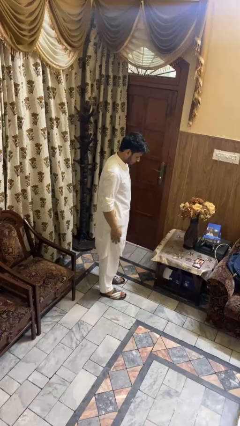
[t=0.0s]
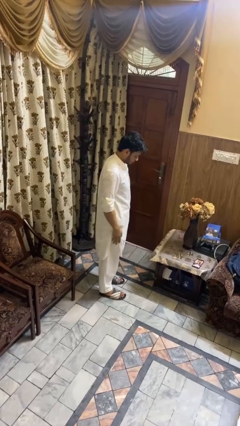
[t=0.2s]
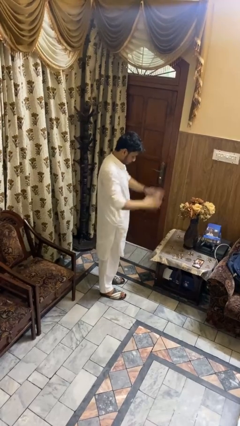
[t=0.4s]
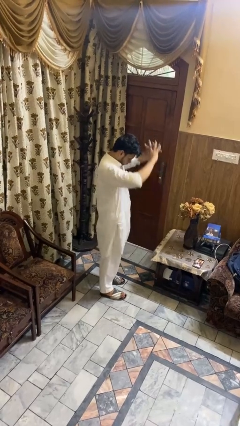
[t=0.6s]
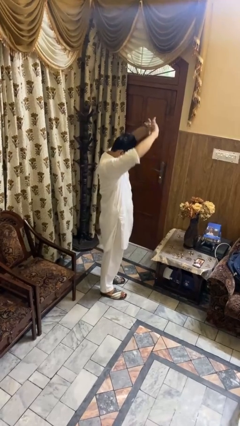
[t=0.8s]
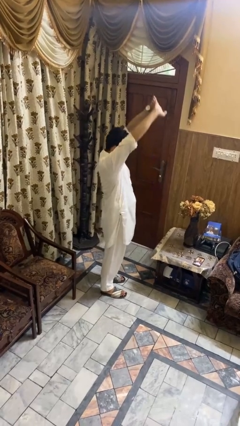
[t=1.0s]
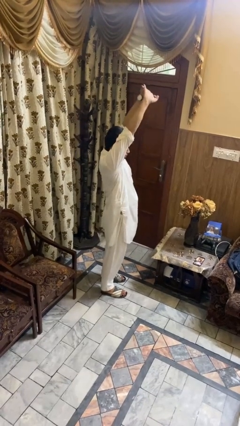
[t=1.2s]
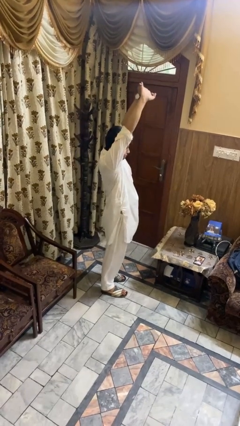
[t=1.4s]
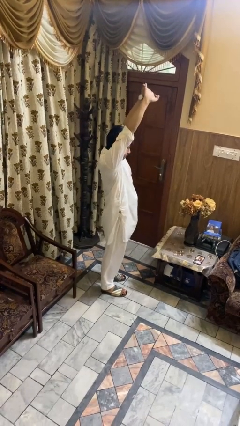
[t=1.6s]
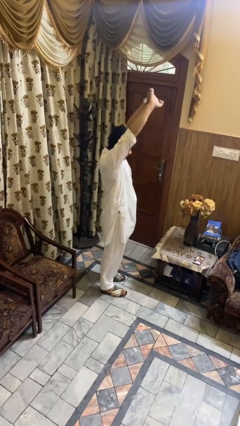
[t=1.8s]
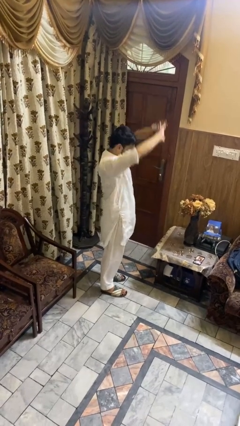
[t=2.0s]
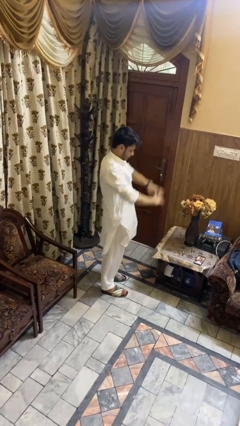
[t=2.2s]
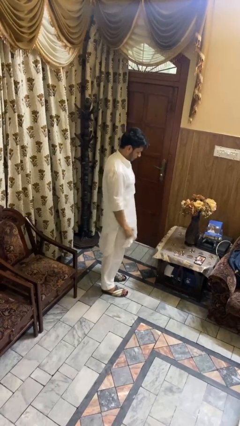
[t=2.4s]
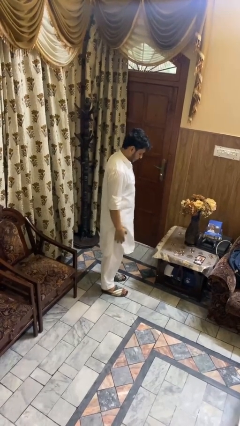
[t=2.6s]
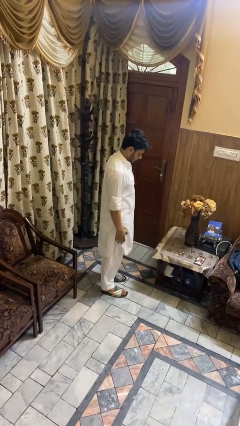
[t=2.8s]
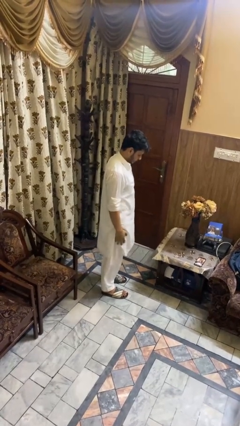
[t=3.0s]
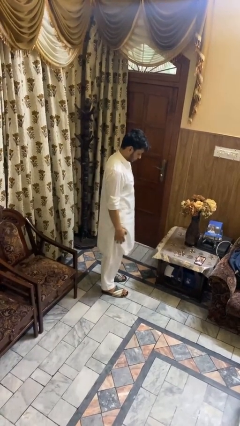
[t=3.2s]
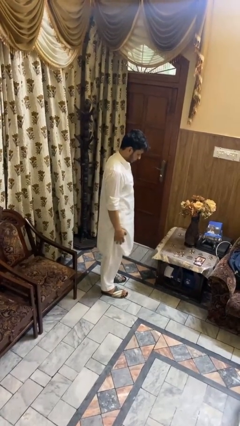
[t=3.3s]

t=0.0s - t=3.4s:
person stretches arms over head

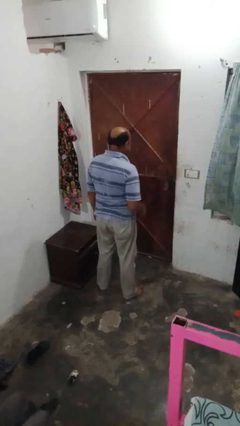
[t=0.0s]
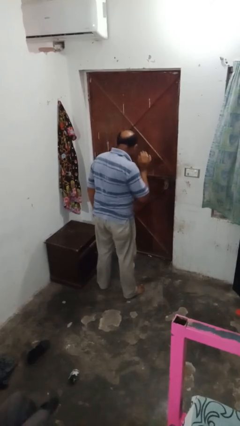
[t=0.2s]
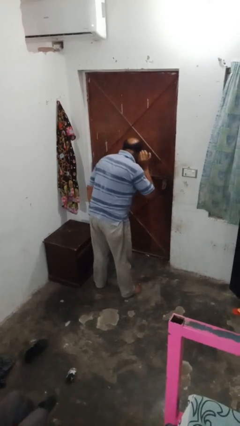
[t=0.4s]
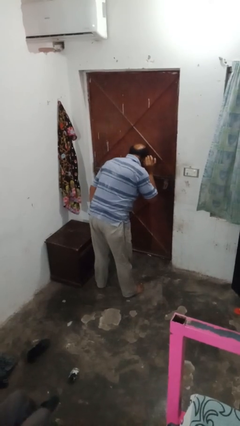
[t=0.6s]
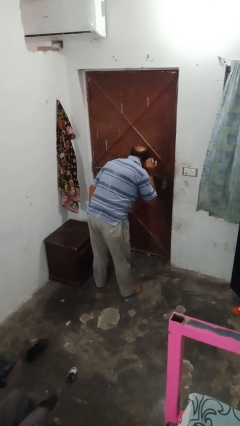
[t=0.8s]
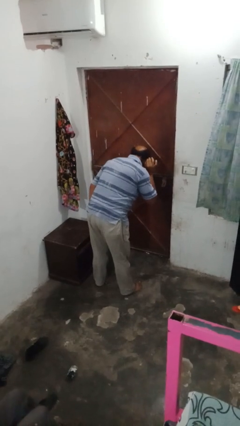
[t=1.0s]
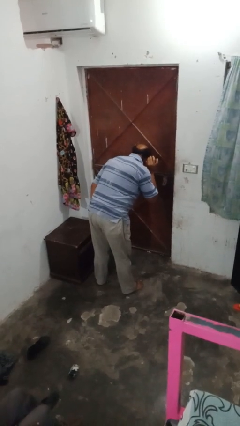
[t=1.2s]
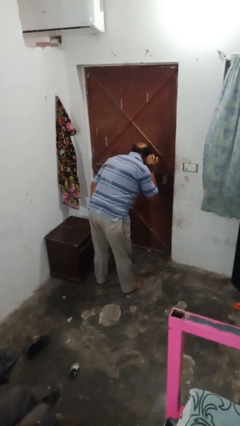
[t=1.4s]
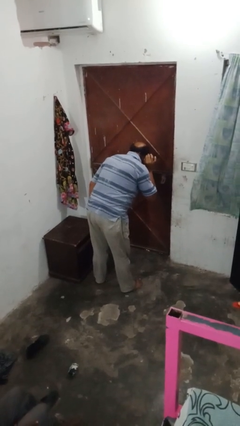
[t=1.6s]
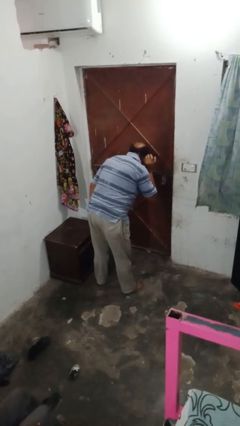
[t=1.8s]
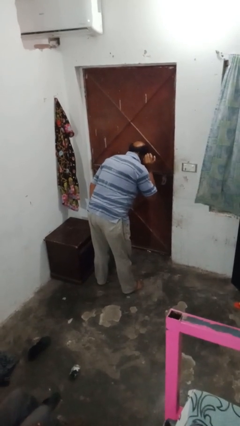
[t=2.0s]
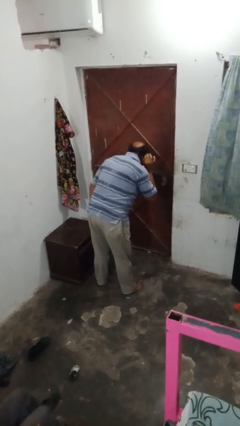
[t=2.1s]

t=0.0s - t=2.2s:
person gestures listen closely

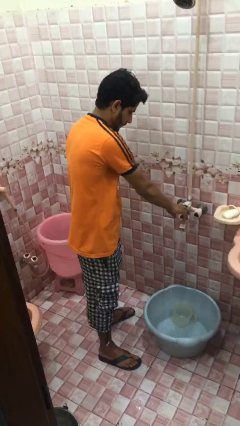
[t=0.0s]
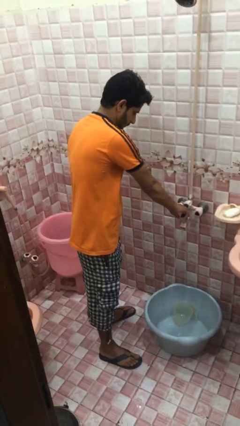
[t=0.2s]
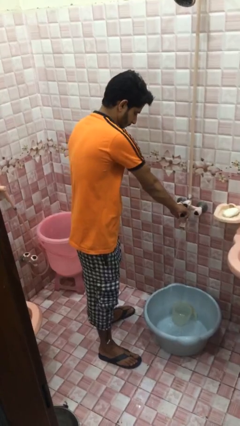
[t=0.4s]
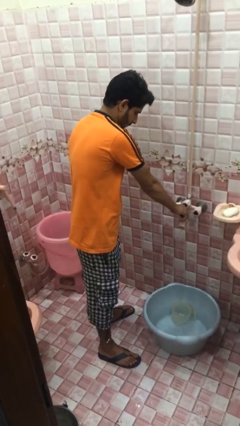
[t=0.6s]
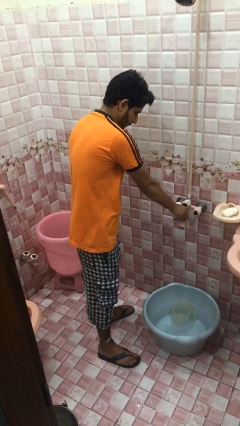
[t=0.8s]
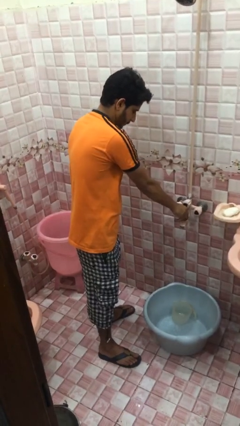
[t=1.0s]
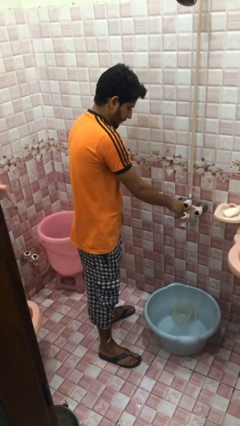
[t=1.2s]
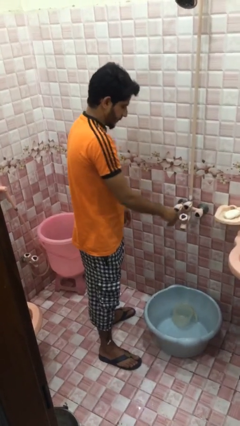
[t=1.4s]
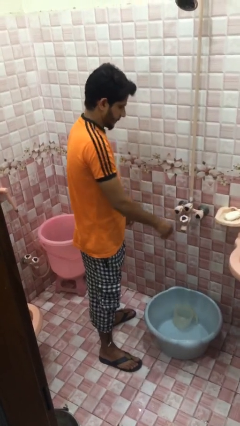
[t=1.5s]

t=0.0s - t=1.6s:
person turns off faucet

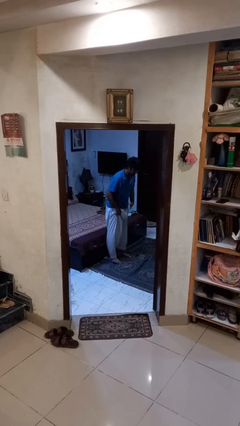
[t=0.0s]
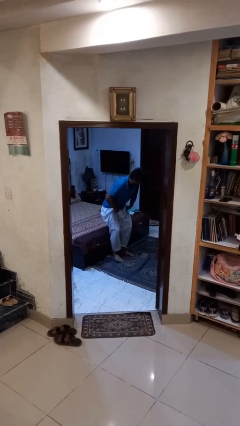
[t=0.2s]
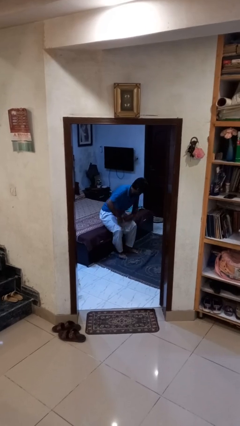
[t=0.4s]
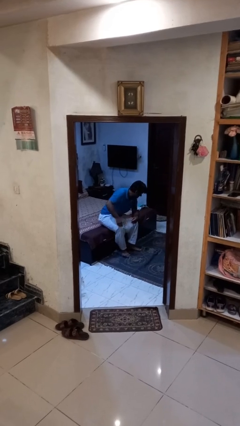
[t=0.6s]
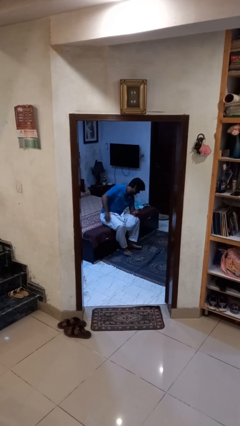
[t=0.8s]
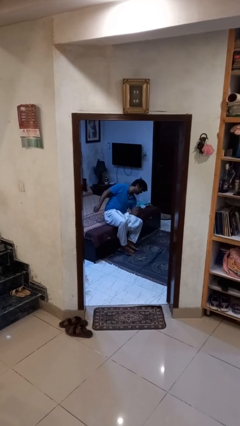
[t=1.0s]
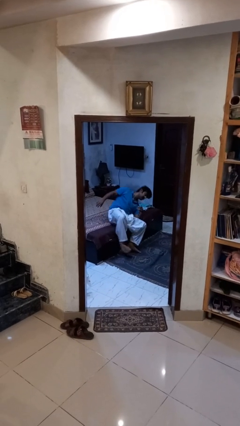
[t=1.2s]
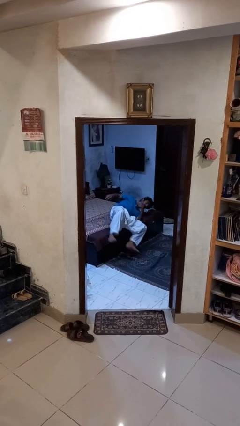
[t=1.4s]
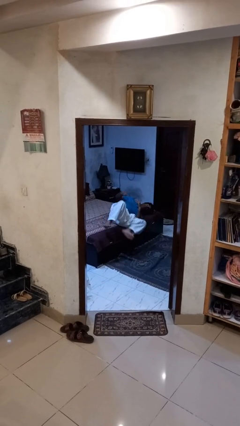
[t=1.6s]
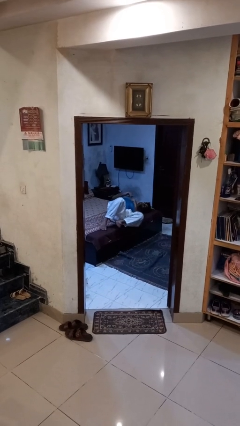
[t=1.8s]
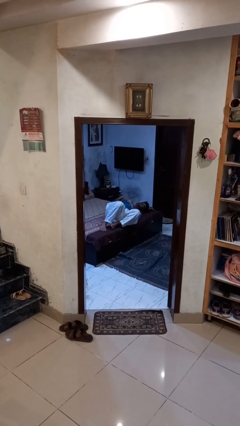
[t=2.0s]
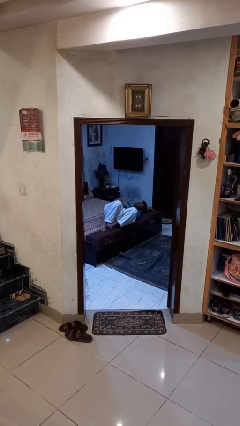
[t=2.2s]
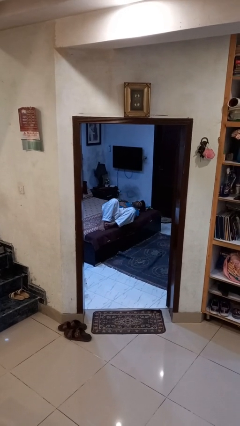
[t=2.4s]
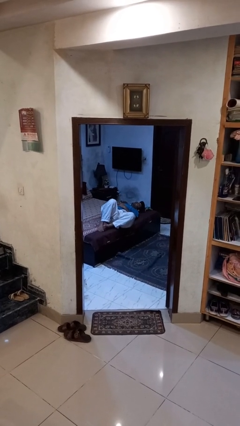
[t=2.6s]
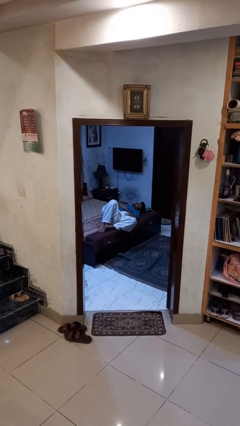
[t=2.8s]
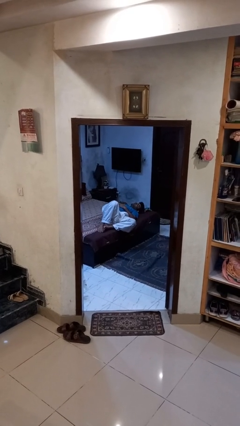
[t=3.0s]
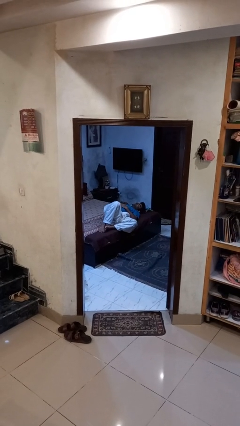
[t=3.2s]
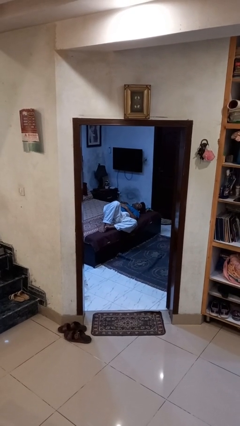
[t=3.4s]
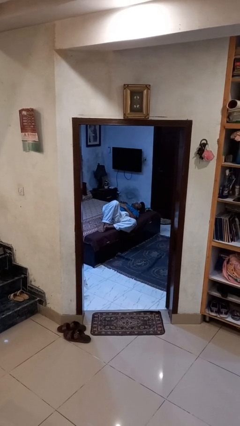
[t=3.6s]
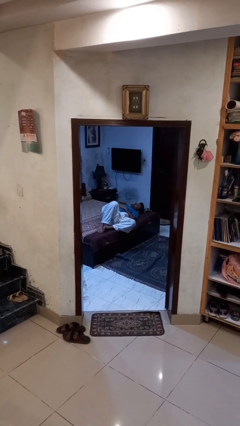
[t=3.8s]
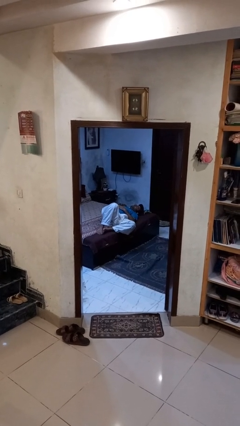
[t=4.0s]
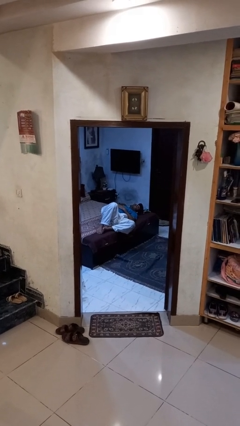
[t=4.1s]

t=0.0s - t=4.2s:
person lies down on bed

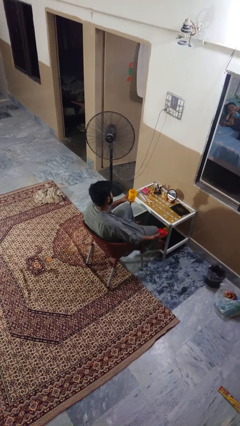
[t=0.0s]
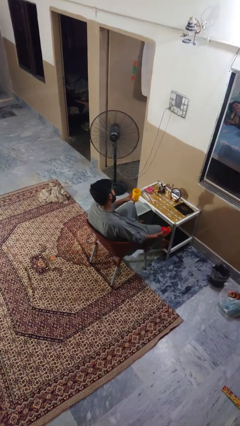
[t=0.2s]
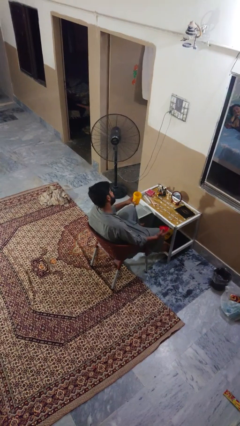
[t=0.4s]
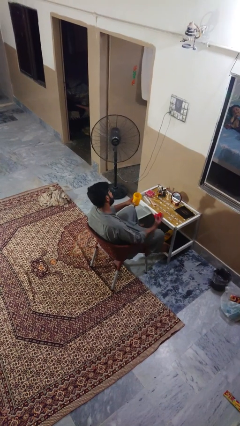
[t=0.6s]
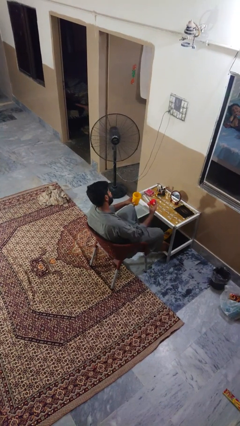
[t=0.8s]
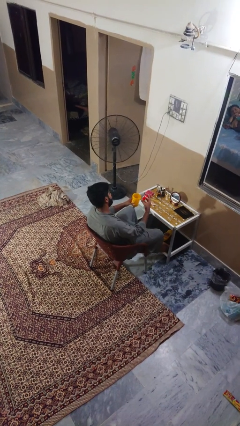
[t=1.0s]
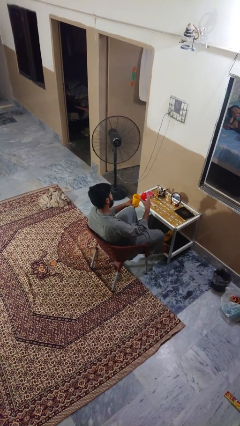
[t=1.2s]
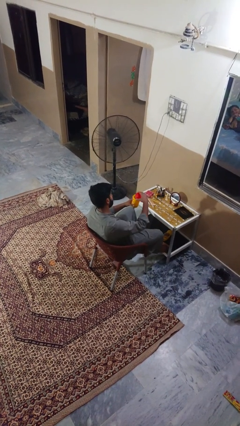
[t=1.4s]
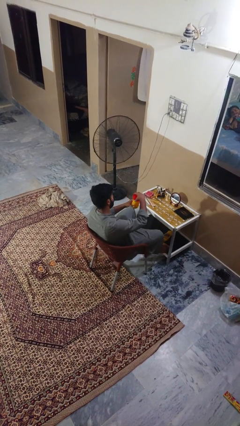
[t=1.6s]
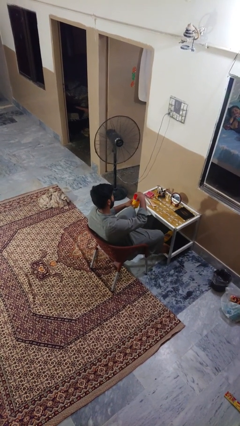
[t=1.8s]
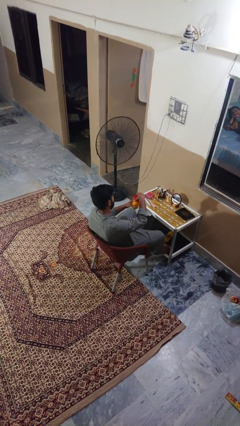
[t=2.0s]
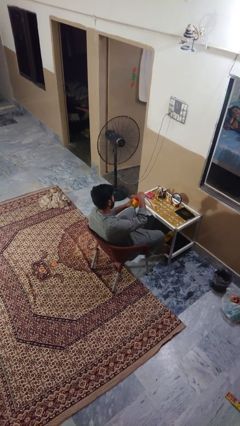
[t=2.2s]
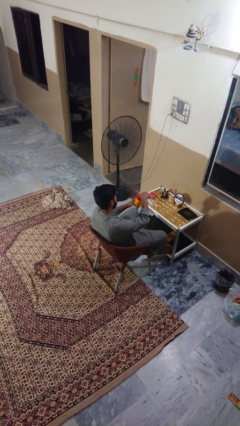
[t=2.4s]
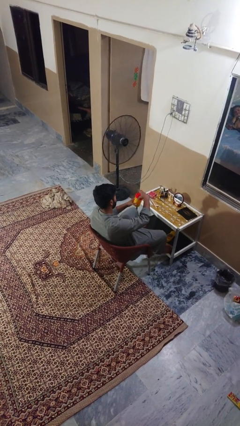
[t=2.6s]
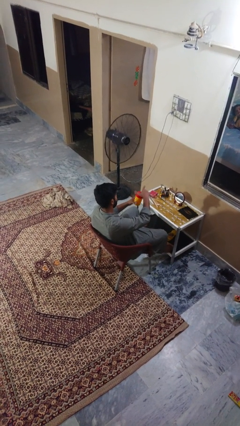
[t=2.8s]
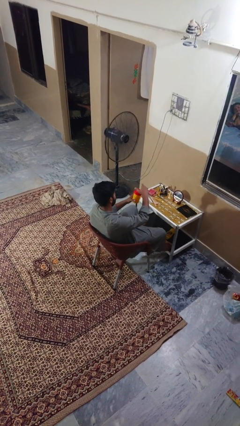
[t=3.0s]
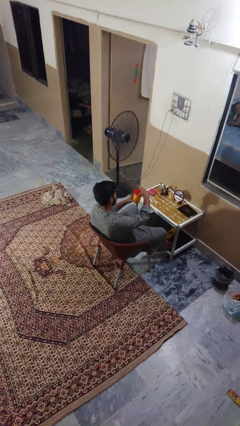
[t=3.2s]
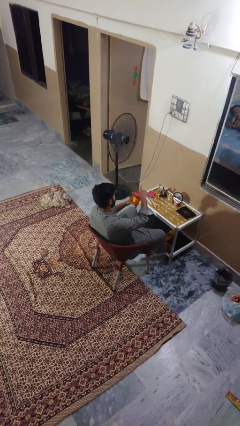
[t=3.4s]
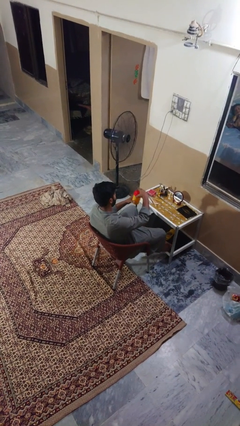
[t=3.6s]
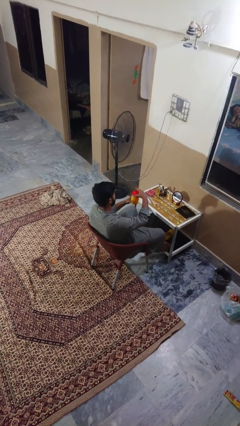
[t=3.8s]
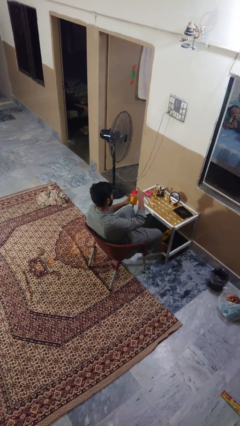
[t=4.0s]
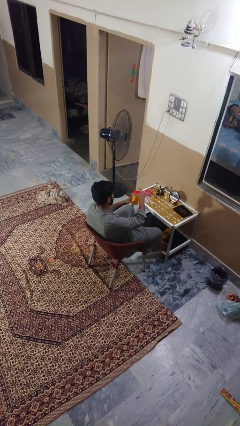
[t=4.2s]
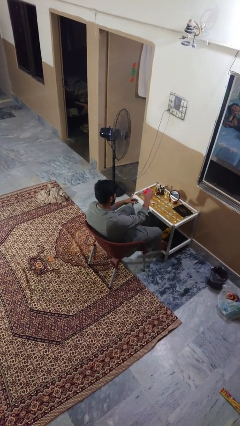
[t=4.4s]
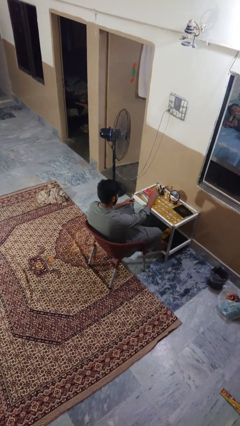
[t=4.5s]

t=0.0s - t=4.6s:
person closes jar

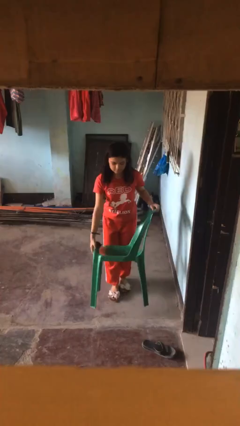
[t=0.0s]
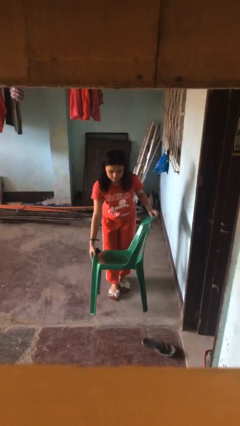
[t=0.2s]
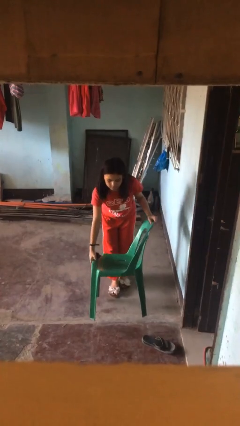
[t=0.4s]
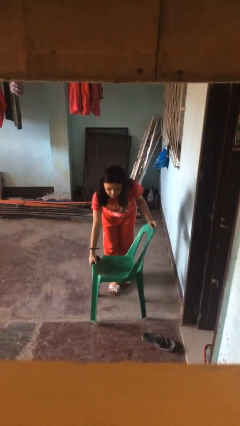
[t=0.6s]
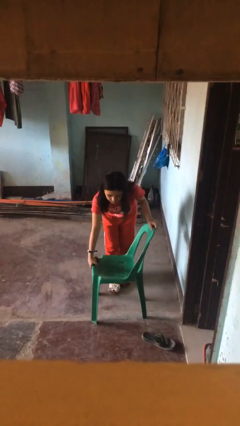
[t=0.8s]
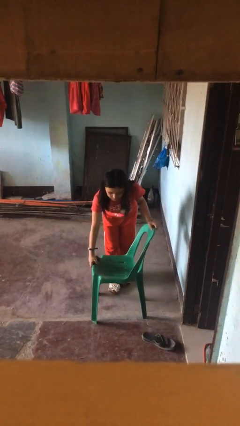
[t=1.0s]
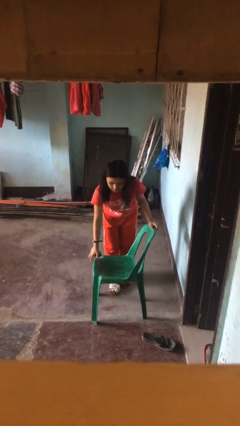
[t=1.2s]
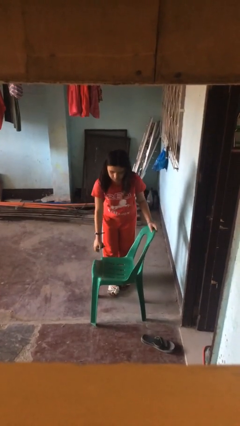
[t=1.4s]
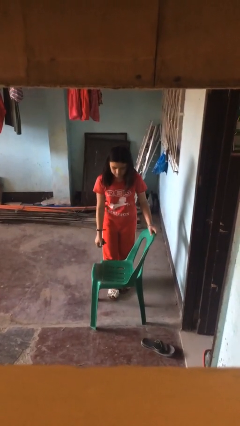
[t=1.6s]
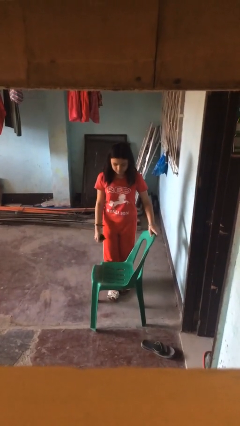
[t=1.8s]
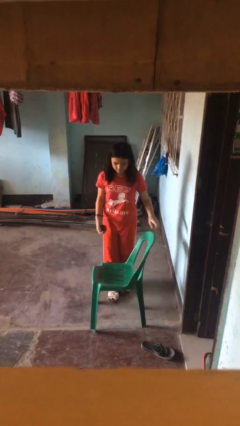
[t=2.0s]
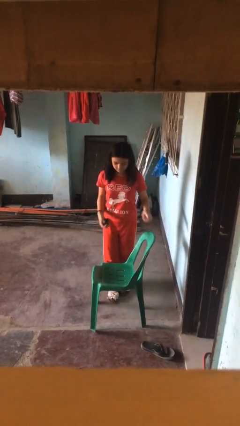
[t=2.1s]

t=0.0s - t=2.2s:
person puts down object on floor
